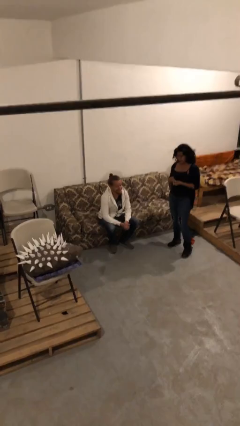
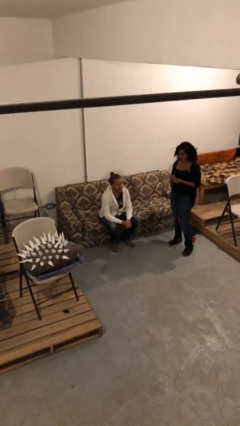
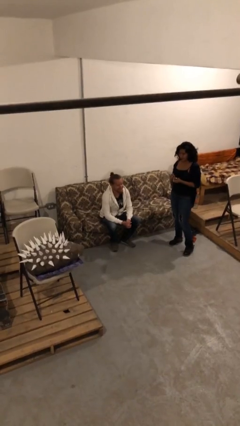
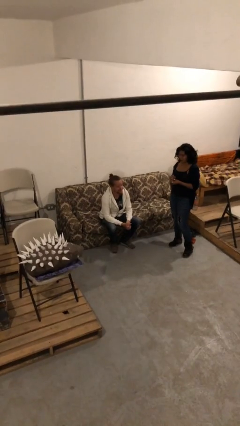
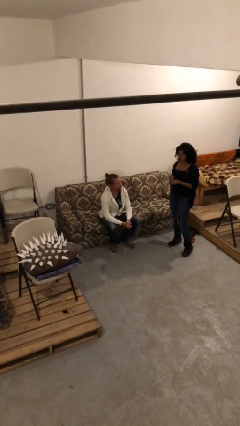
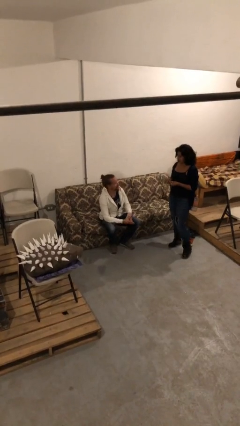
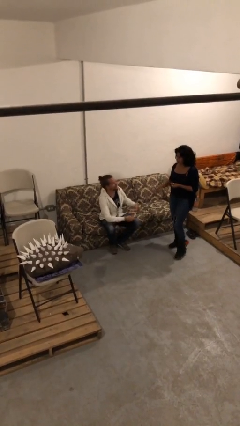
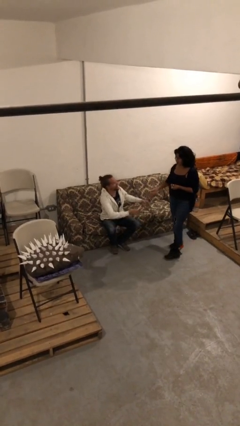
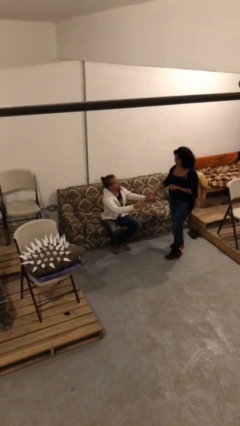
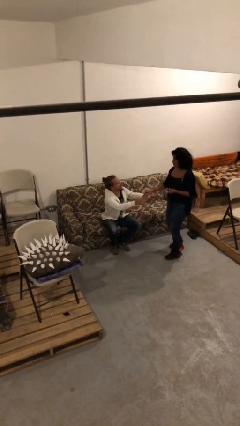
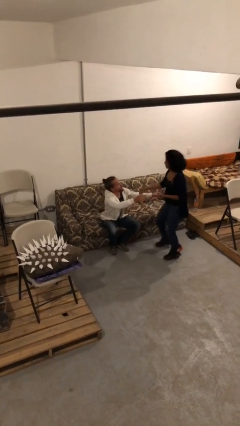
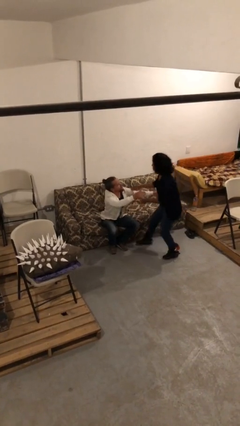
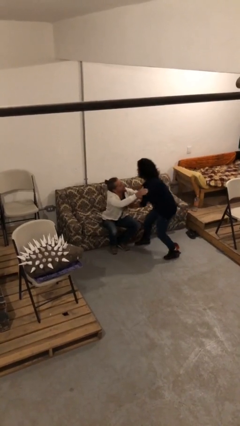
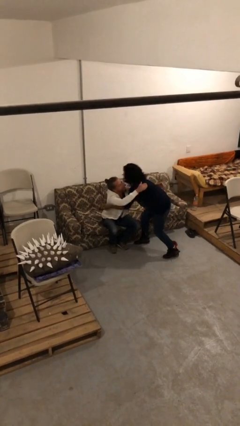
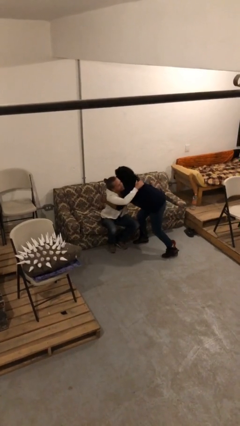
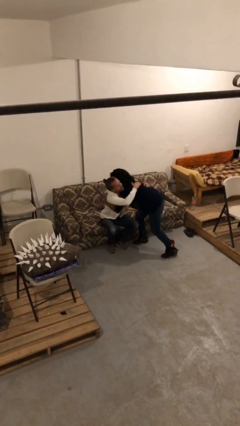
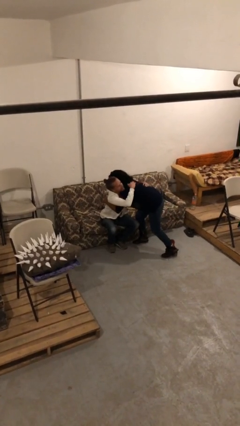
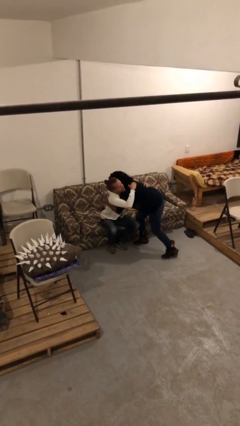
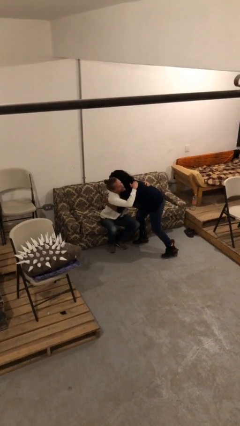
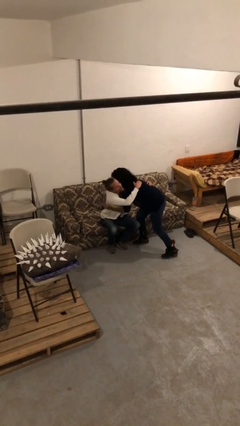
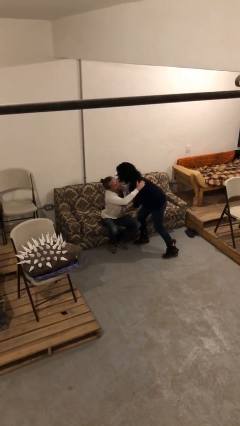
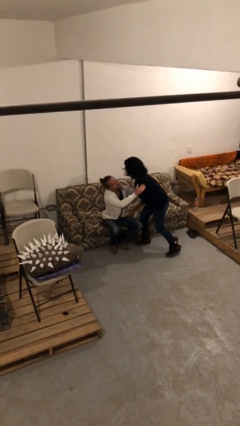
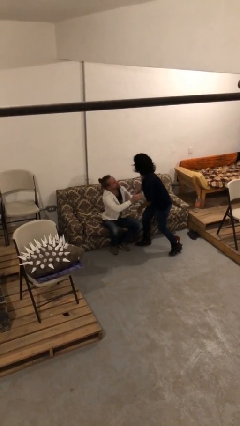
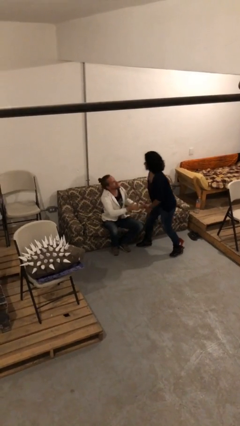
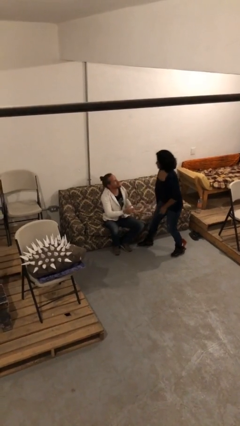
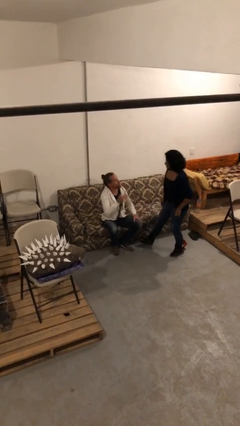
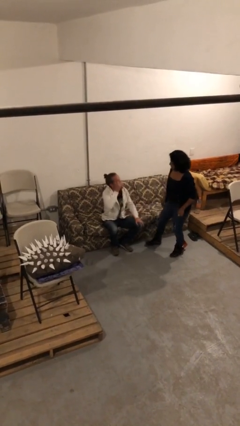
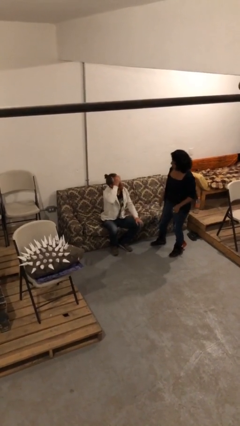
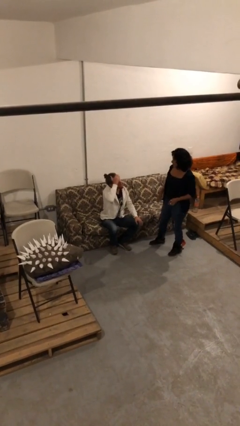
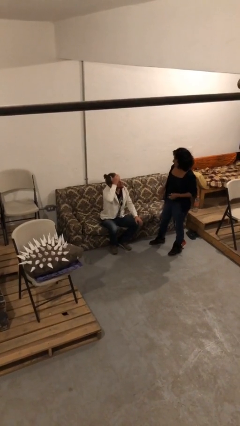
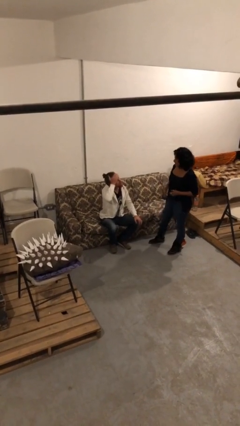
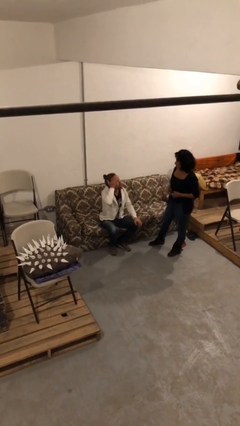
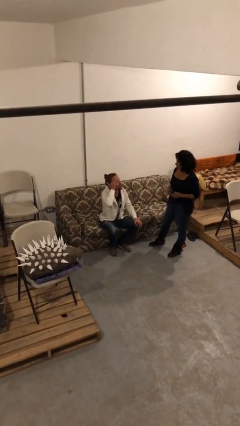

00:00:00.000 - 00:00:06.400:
person embraces person

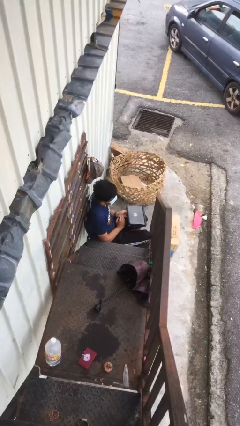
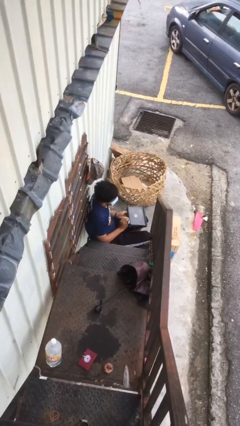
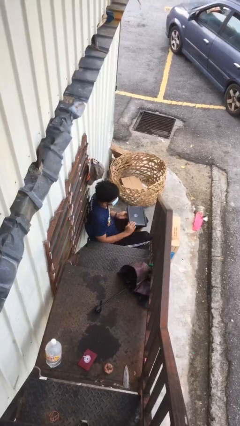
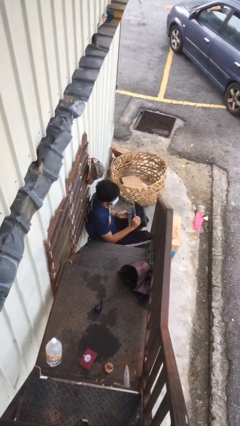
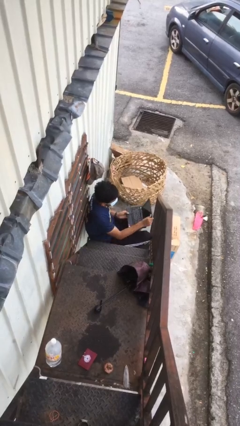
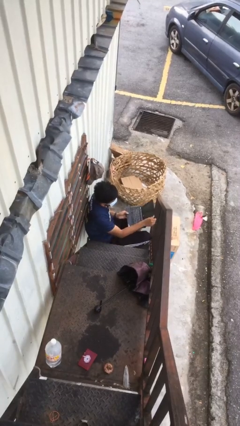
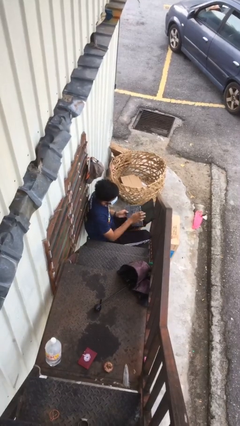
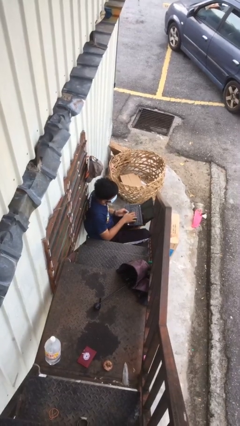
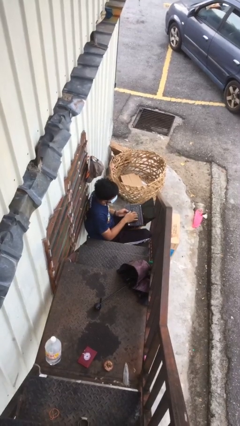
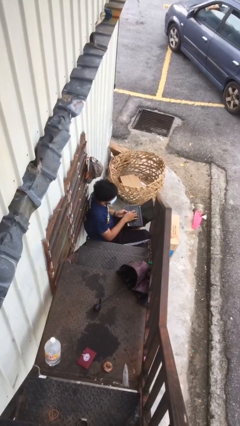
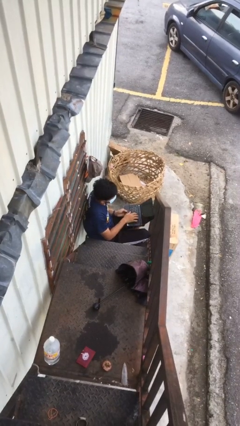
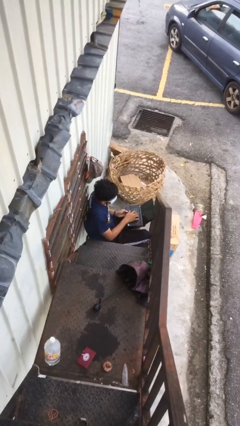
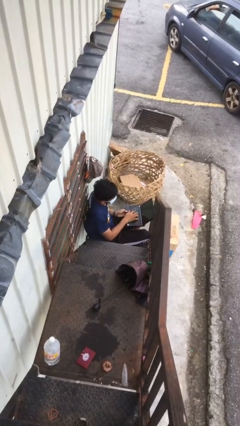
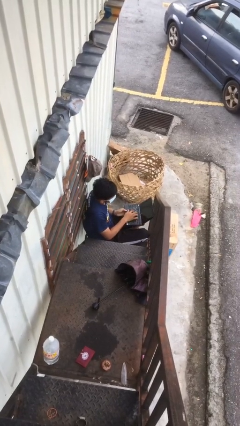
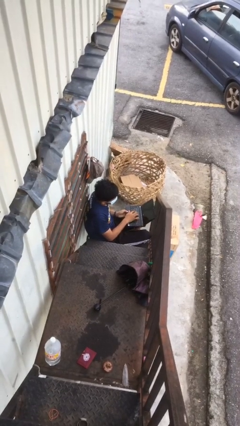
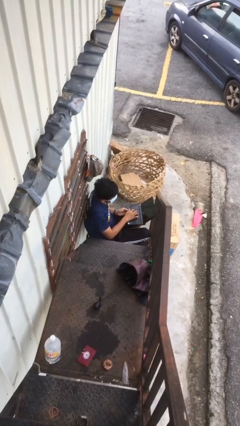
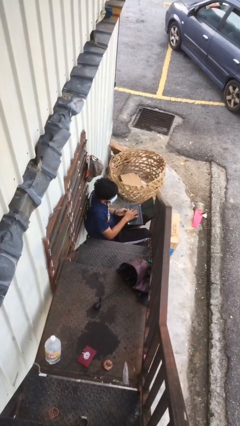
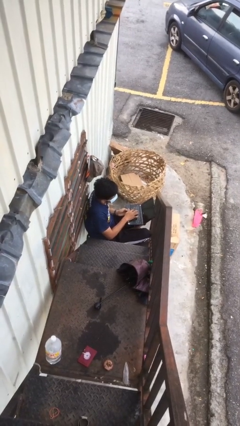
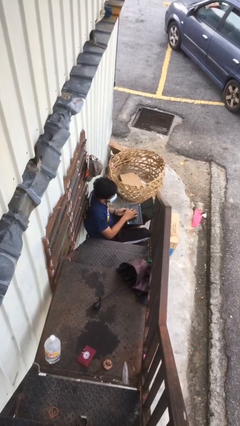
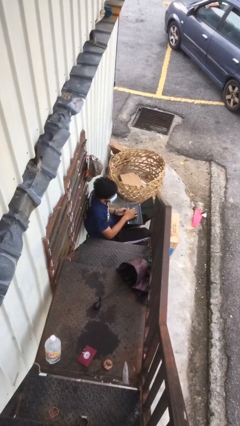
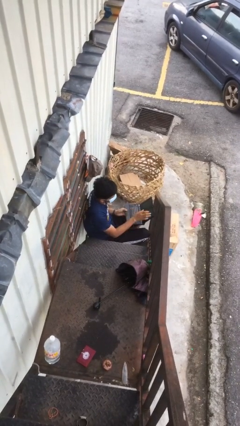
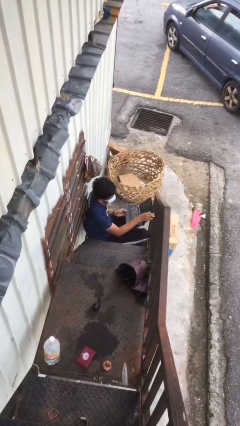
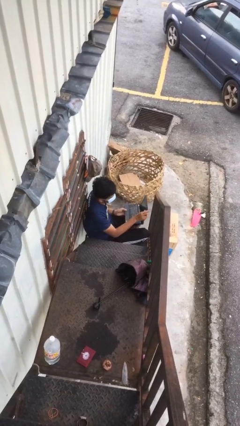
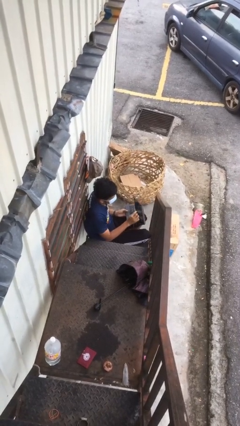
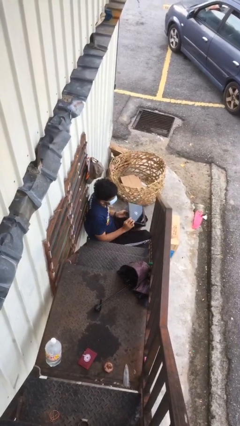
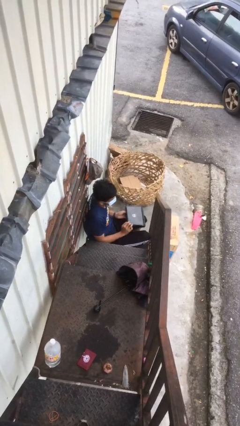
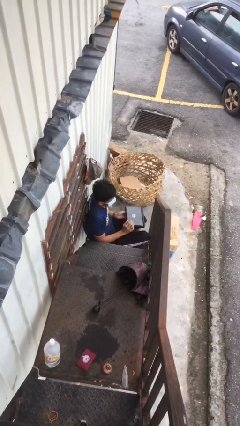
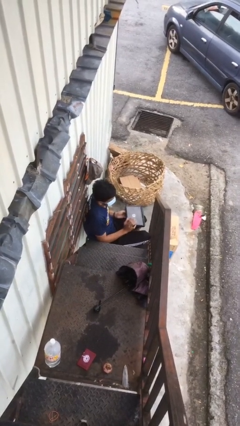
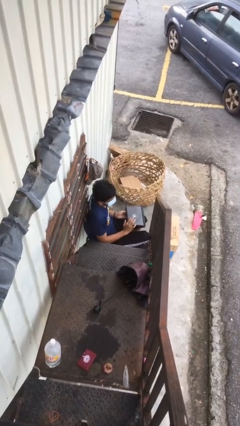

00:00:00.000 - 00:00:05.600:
person interacts with laptop

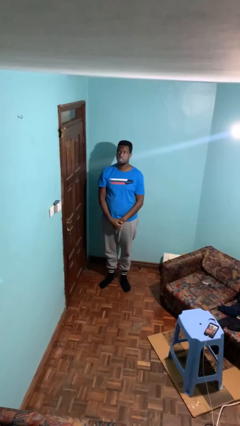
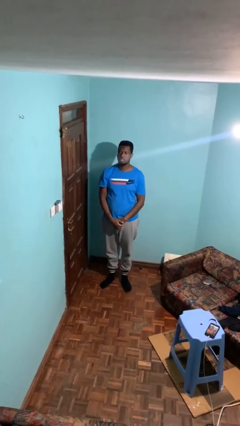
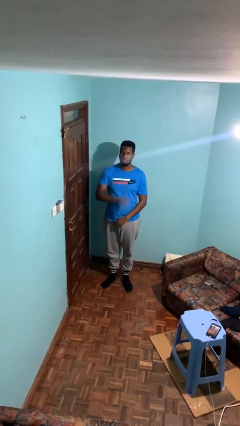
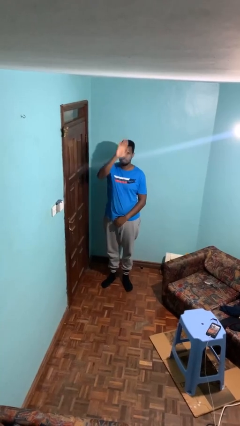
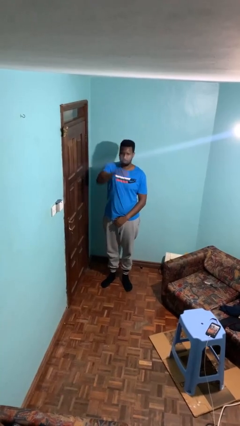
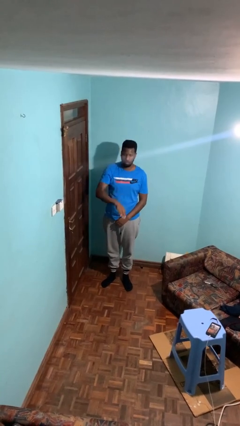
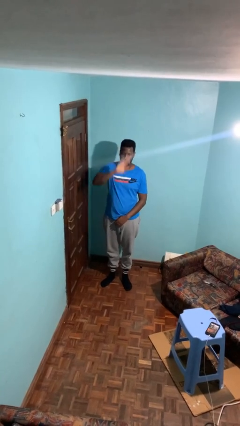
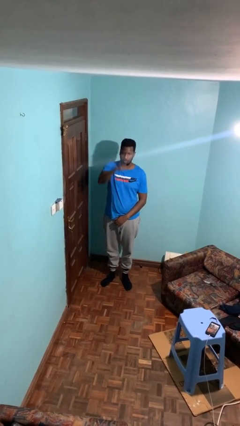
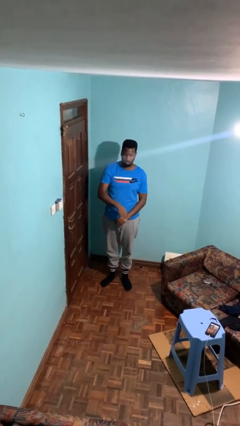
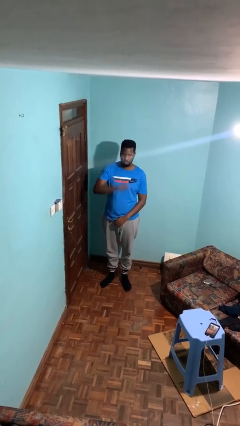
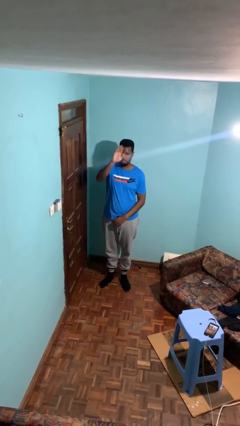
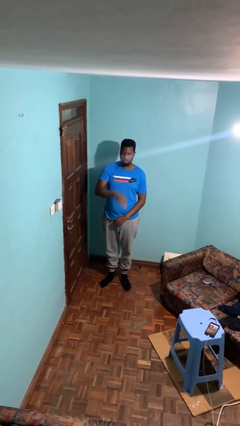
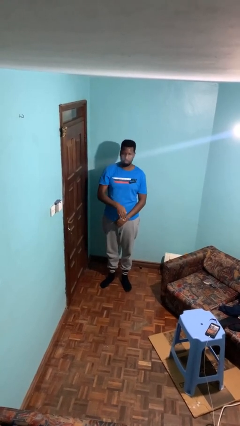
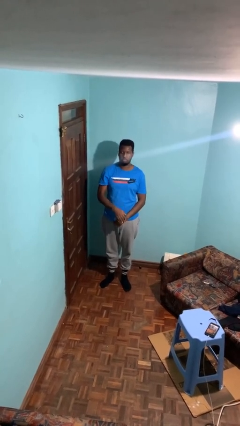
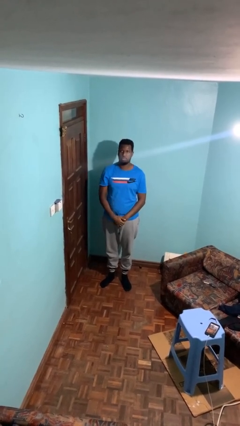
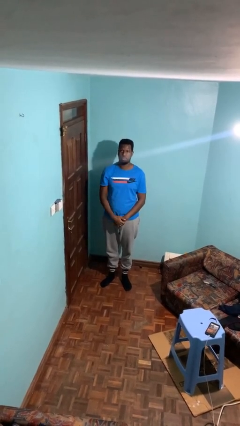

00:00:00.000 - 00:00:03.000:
person gestures swipe down

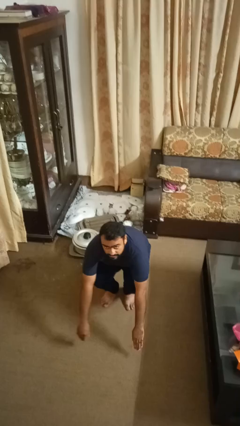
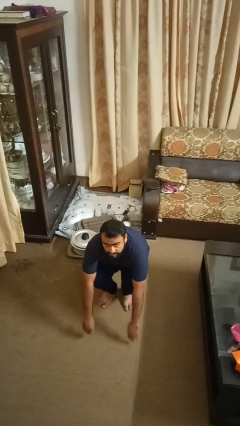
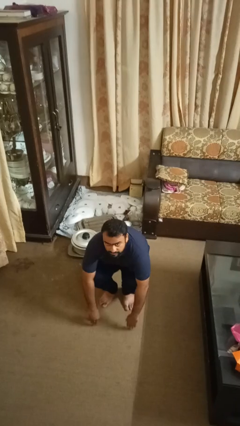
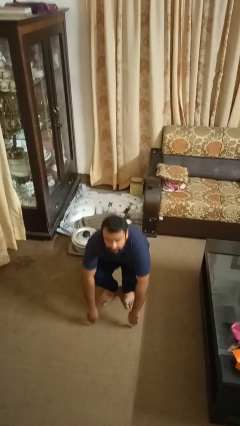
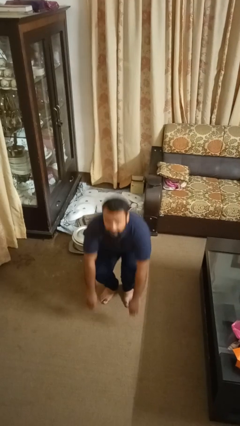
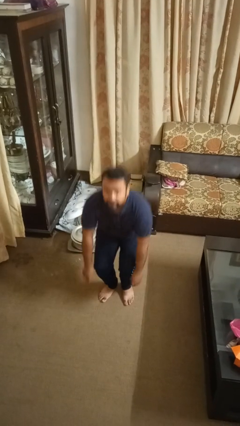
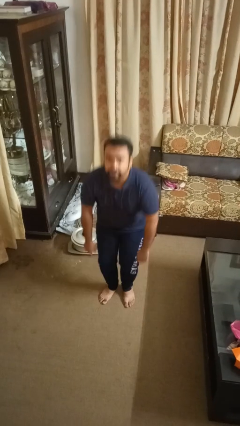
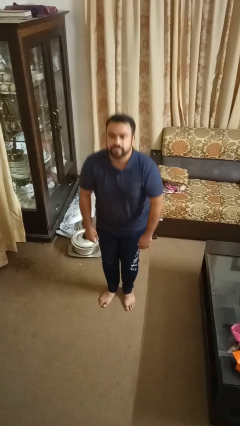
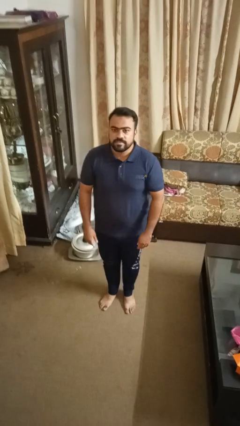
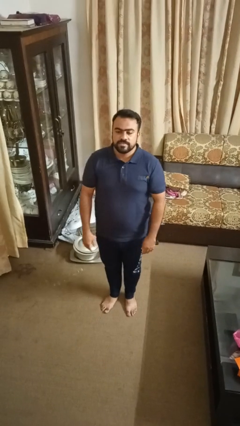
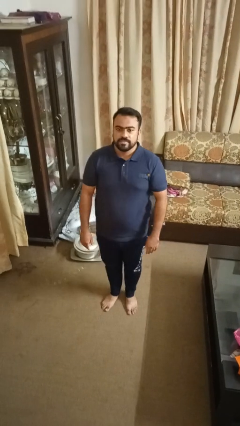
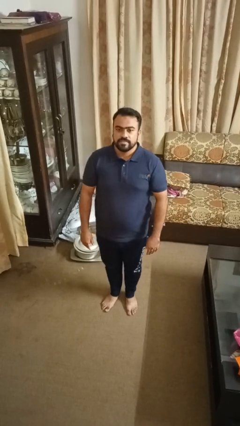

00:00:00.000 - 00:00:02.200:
person stands up

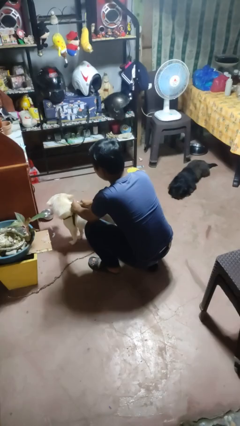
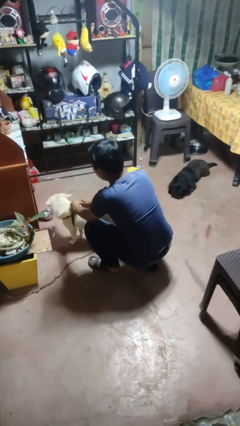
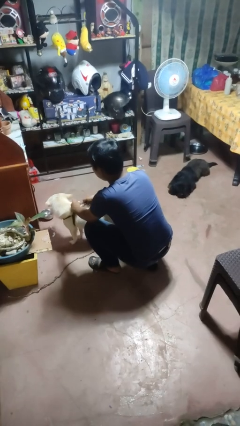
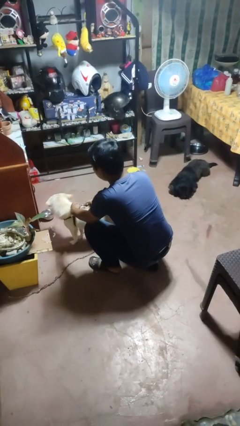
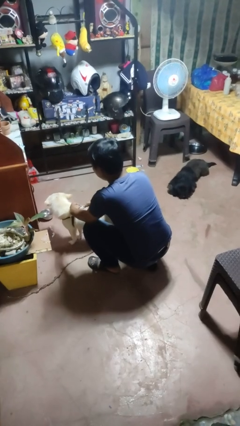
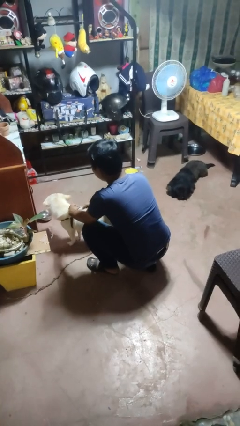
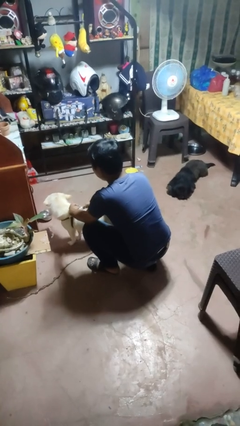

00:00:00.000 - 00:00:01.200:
person attaches leash to dog
